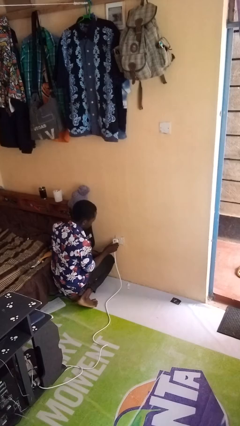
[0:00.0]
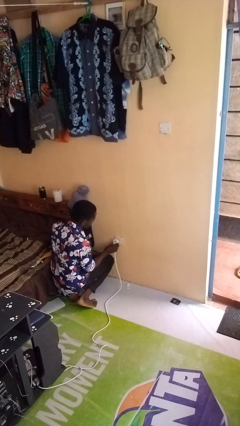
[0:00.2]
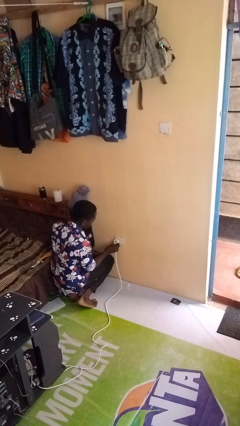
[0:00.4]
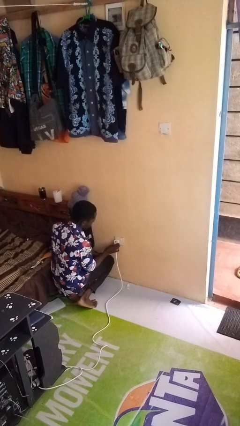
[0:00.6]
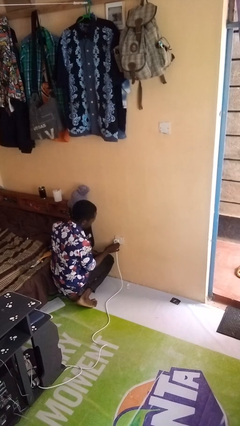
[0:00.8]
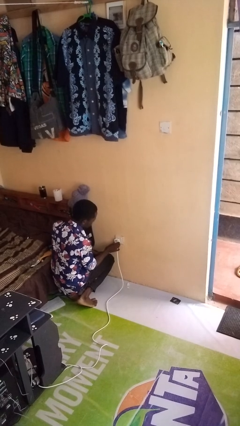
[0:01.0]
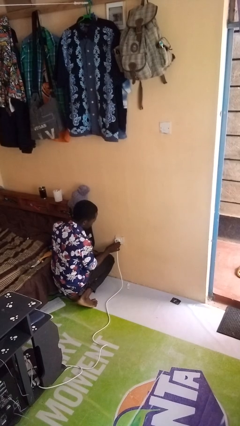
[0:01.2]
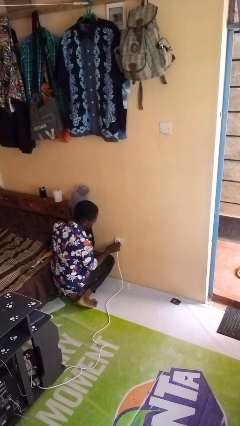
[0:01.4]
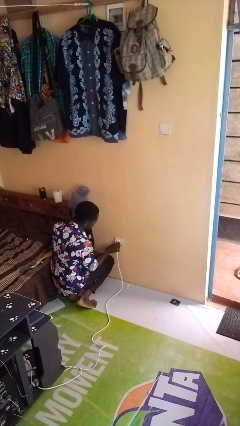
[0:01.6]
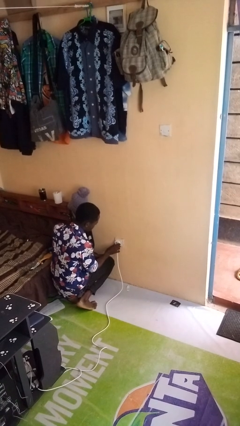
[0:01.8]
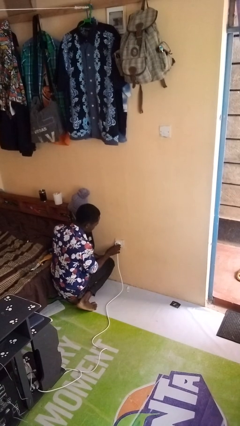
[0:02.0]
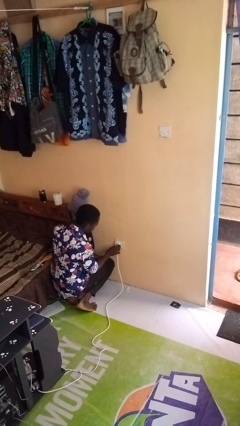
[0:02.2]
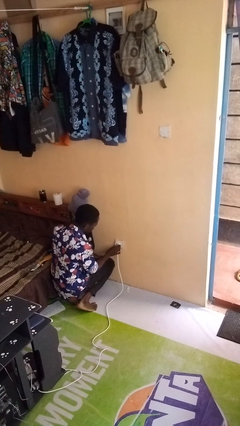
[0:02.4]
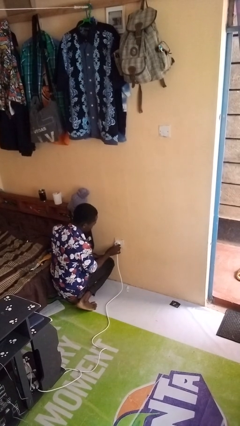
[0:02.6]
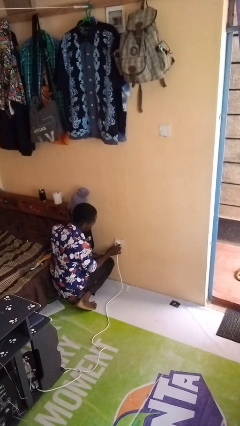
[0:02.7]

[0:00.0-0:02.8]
person plugs into electrical socket

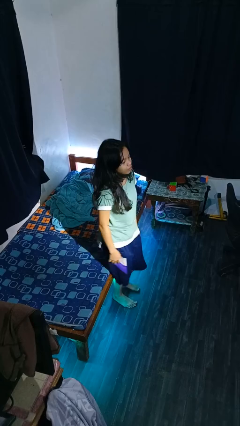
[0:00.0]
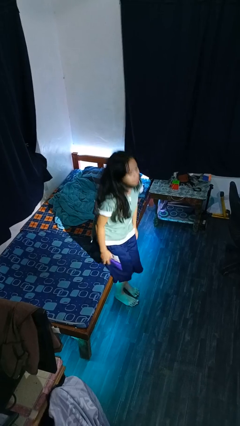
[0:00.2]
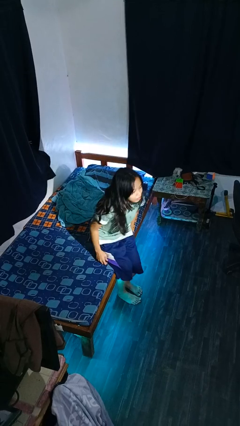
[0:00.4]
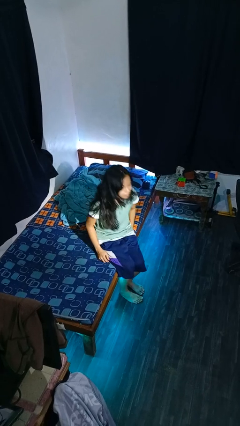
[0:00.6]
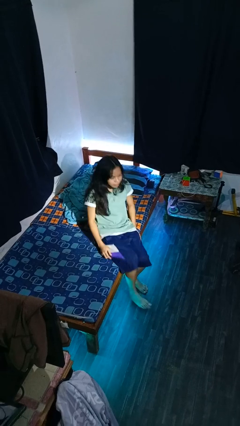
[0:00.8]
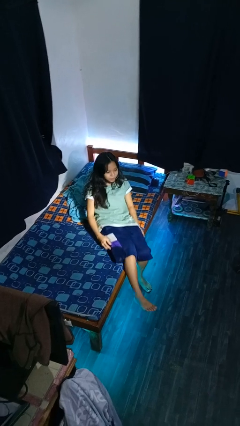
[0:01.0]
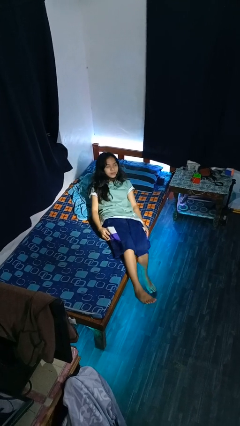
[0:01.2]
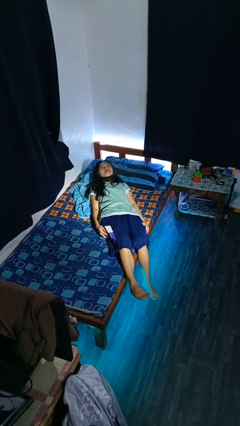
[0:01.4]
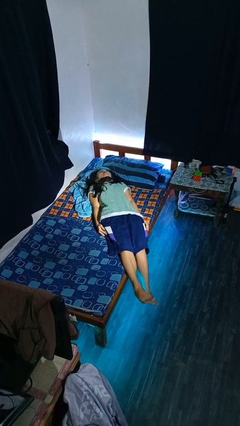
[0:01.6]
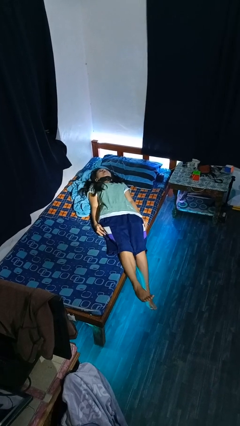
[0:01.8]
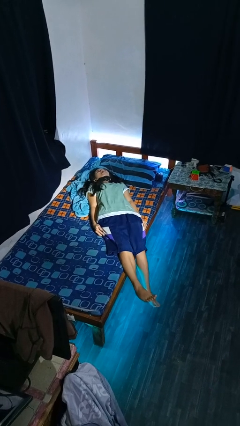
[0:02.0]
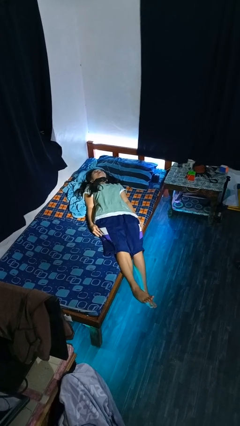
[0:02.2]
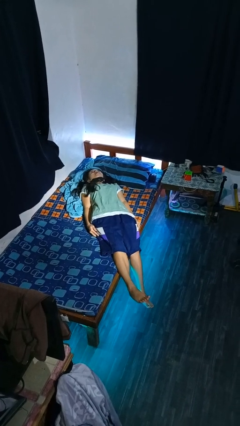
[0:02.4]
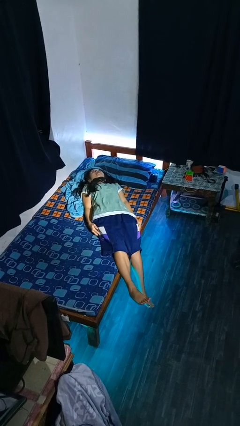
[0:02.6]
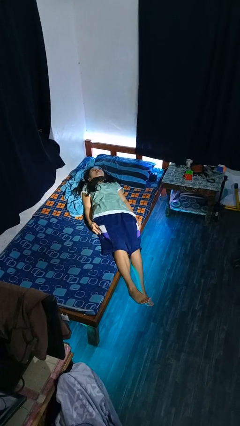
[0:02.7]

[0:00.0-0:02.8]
person lies down on bed

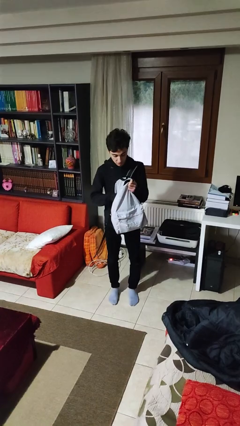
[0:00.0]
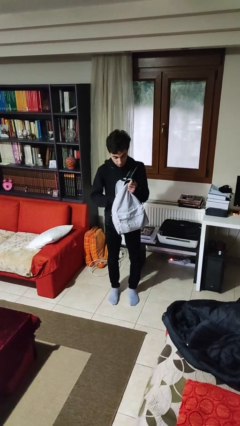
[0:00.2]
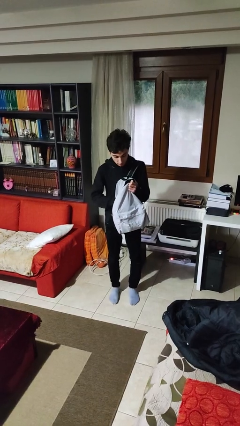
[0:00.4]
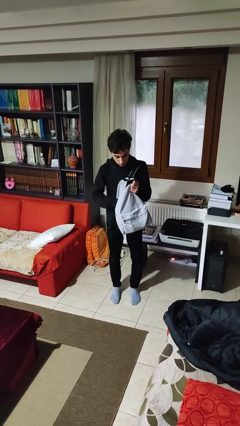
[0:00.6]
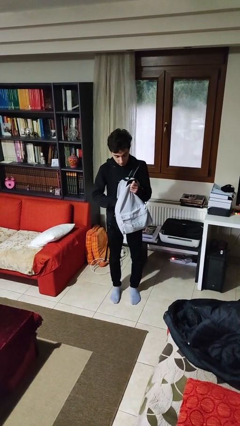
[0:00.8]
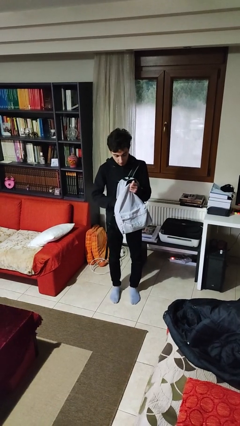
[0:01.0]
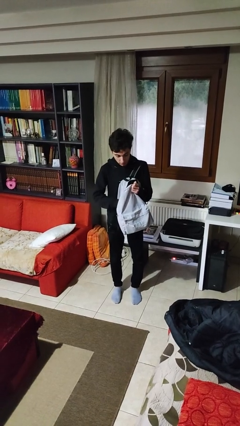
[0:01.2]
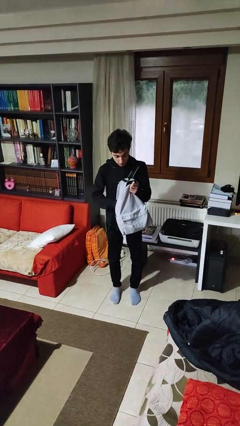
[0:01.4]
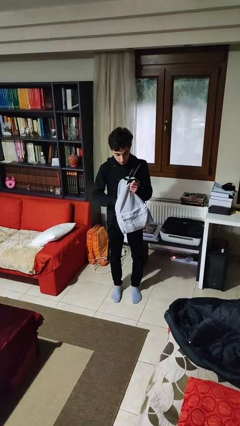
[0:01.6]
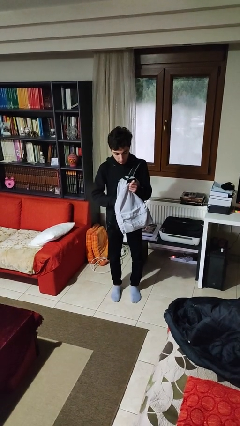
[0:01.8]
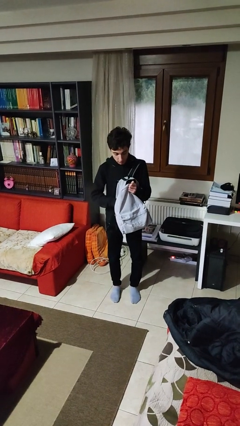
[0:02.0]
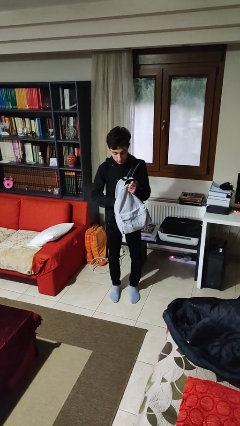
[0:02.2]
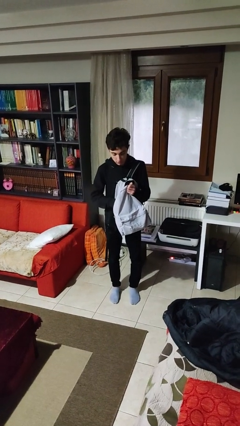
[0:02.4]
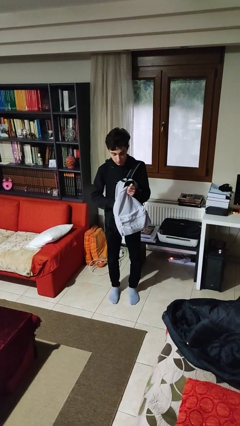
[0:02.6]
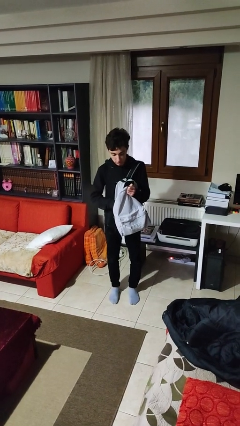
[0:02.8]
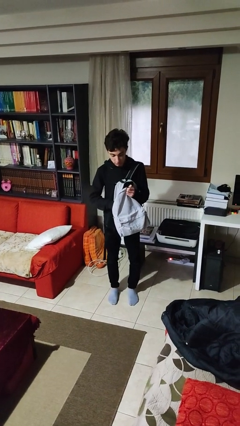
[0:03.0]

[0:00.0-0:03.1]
person searches in backpack

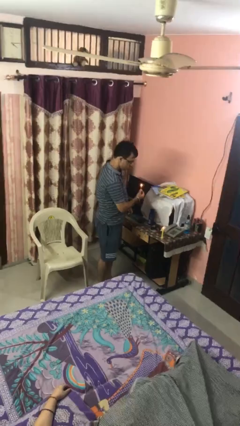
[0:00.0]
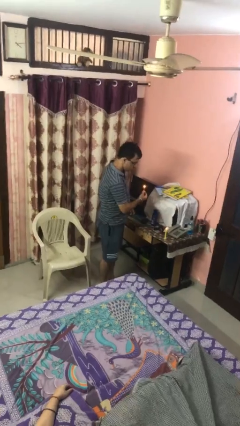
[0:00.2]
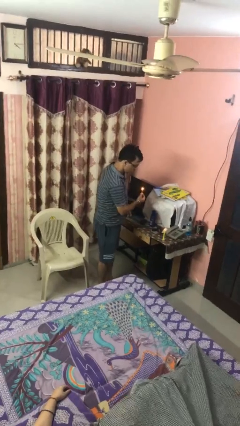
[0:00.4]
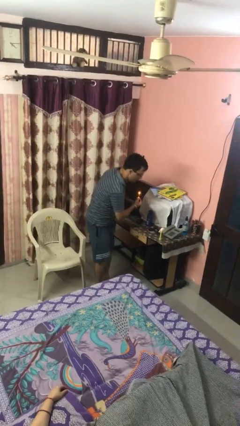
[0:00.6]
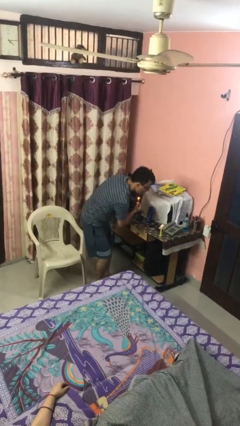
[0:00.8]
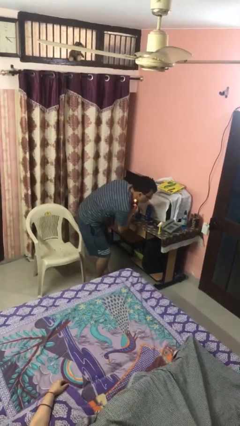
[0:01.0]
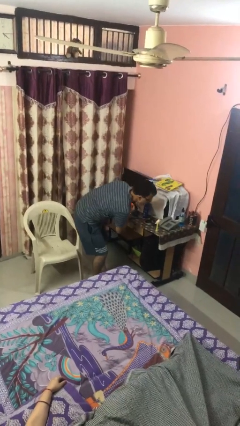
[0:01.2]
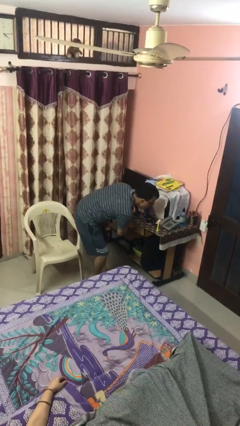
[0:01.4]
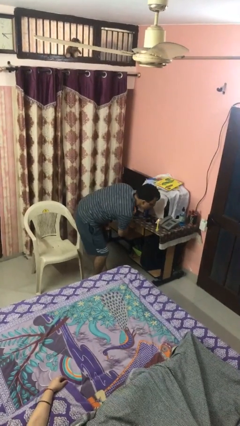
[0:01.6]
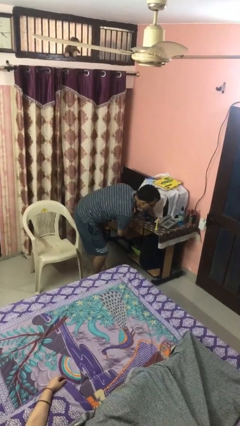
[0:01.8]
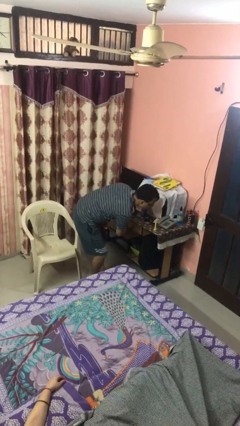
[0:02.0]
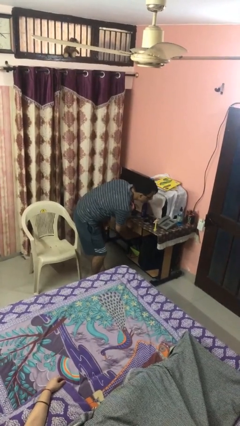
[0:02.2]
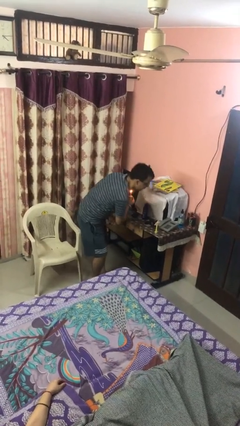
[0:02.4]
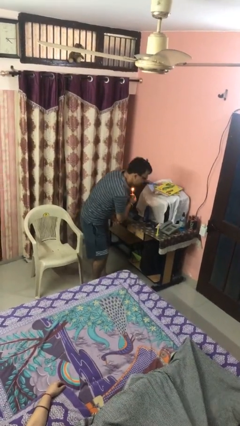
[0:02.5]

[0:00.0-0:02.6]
person extinguishes candle

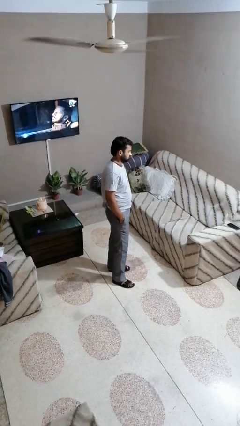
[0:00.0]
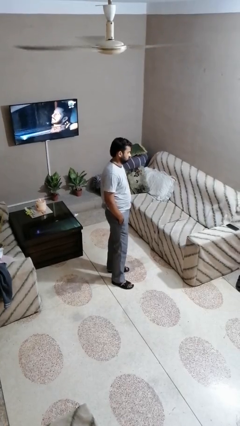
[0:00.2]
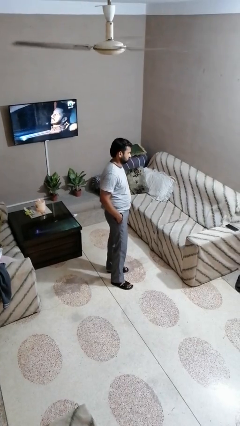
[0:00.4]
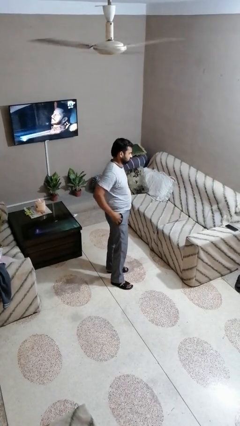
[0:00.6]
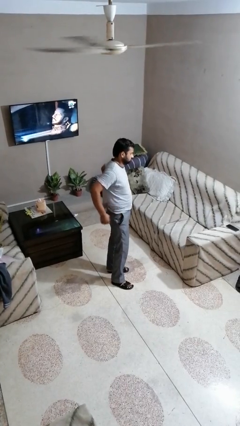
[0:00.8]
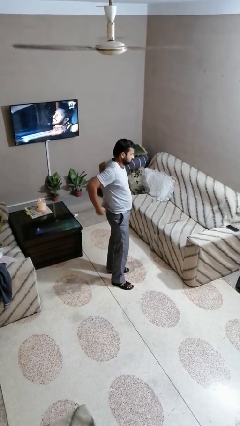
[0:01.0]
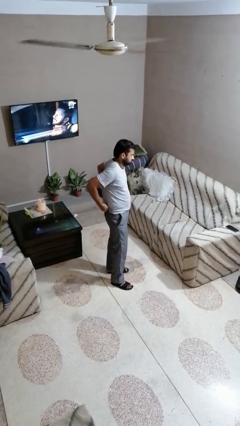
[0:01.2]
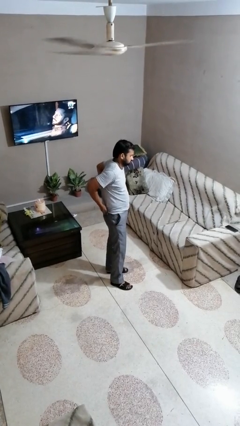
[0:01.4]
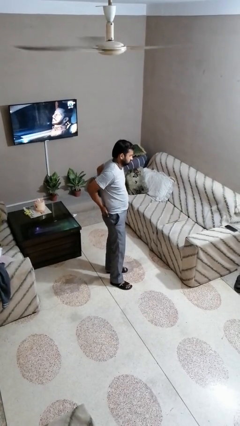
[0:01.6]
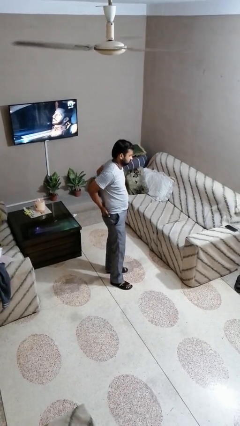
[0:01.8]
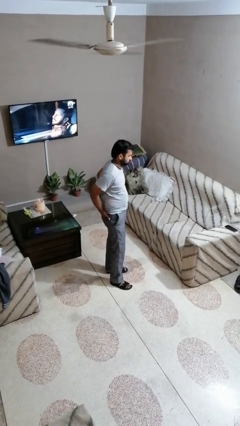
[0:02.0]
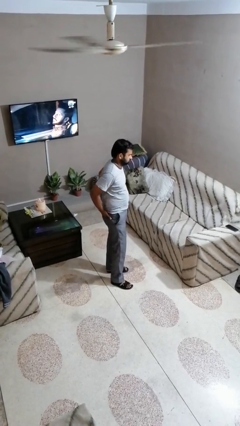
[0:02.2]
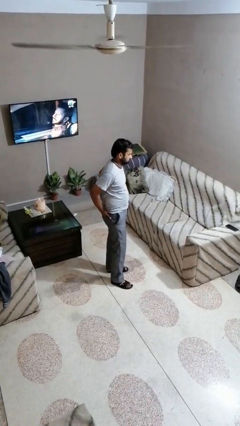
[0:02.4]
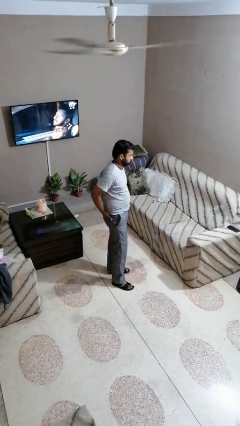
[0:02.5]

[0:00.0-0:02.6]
person puts hands in back pockets

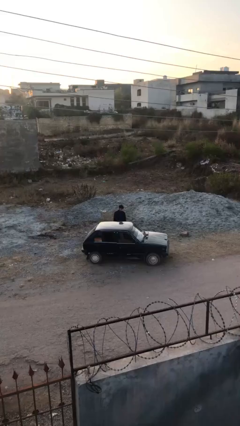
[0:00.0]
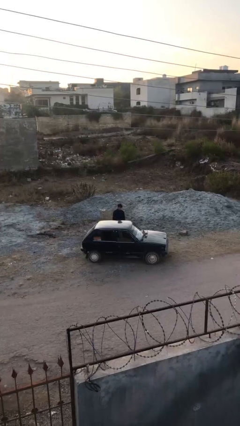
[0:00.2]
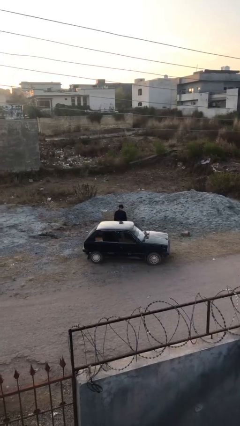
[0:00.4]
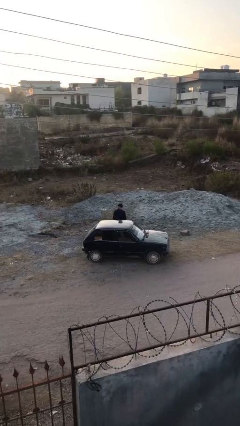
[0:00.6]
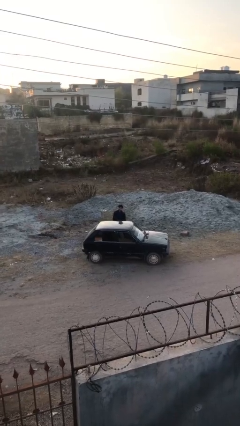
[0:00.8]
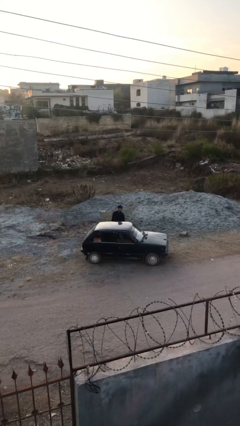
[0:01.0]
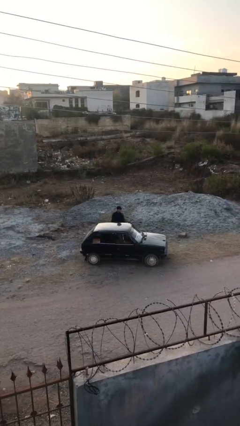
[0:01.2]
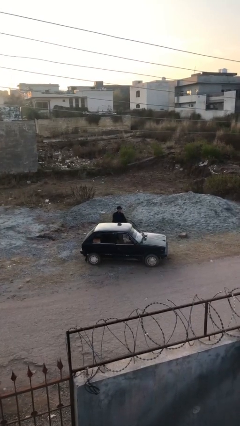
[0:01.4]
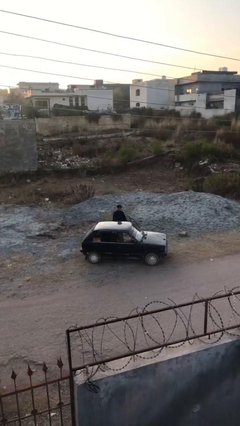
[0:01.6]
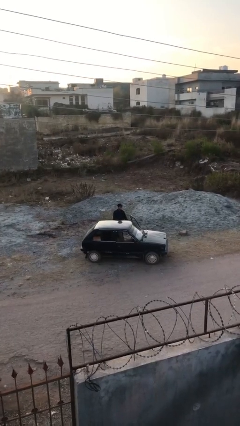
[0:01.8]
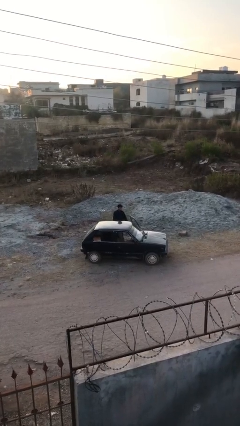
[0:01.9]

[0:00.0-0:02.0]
person opens car door

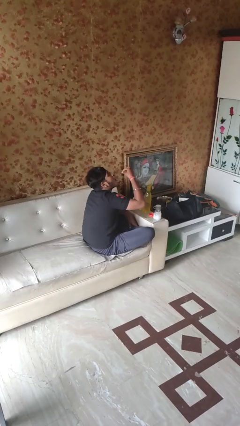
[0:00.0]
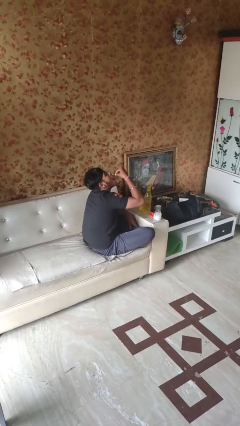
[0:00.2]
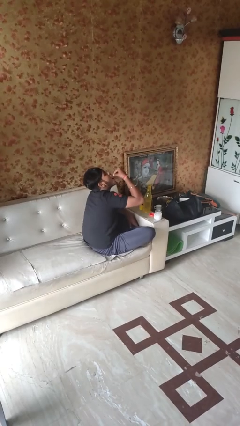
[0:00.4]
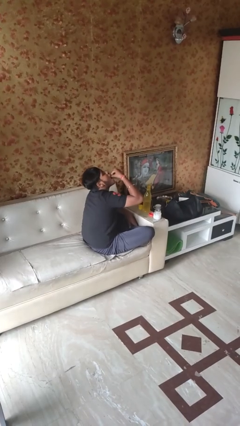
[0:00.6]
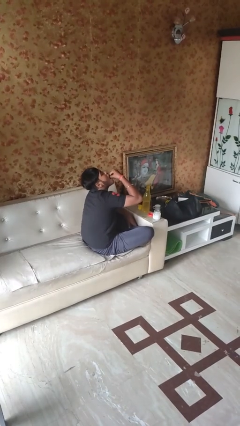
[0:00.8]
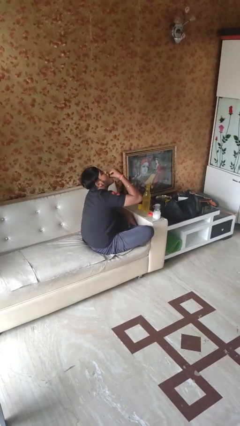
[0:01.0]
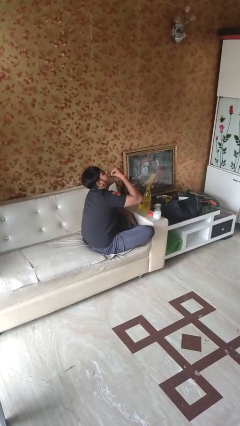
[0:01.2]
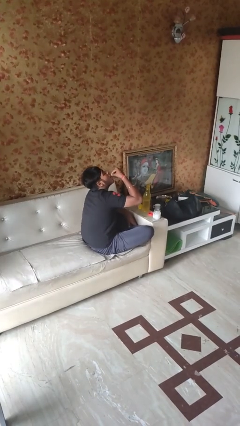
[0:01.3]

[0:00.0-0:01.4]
person takes medicine pills
